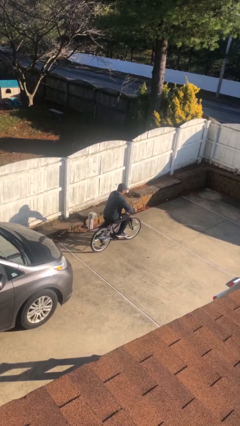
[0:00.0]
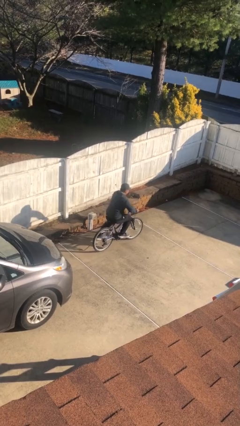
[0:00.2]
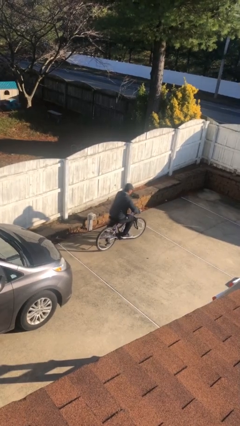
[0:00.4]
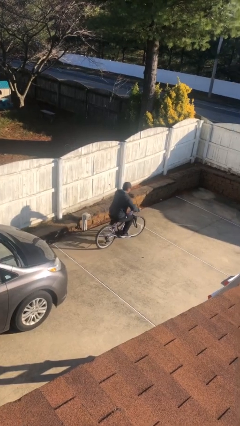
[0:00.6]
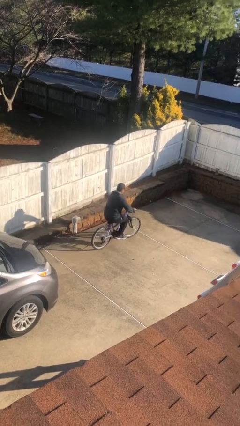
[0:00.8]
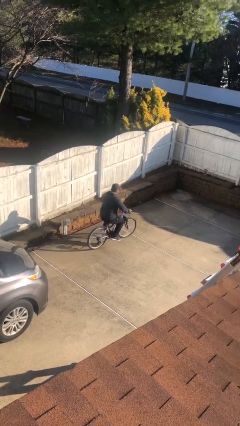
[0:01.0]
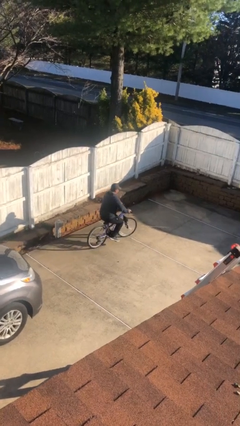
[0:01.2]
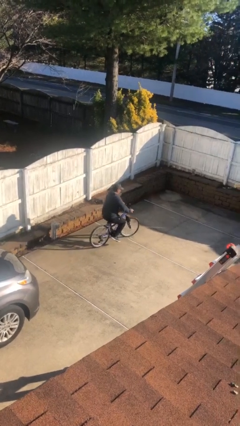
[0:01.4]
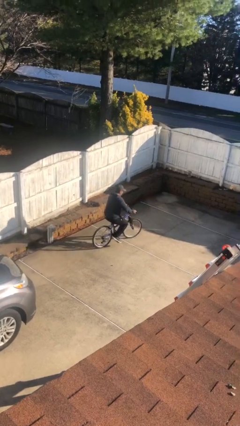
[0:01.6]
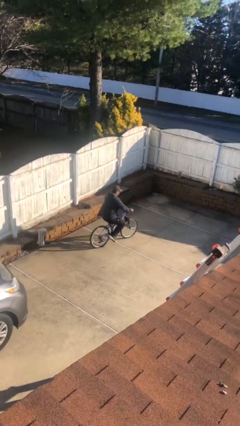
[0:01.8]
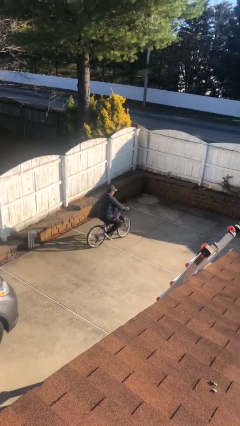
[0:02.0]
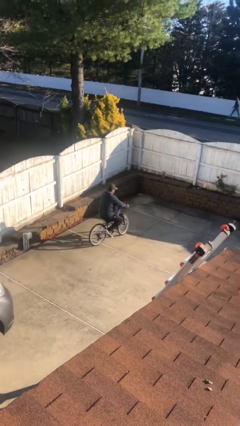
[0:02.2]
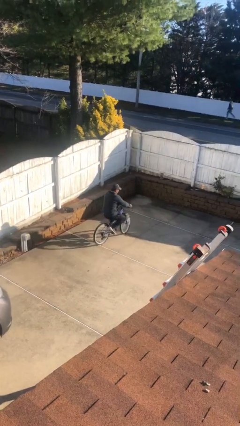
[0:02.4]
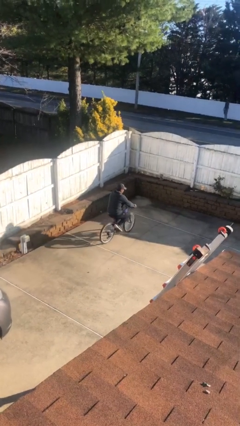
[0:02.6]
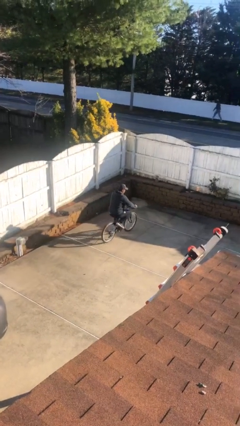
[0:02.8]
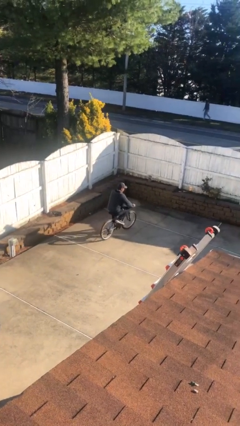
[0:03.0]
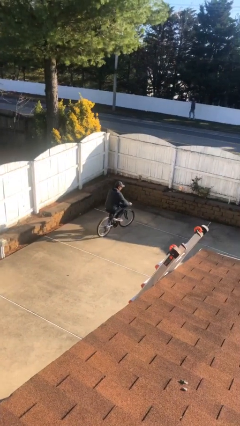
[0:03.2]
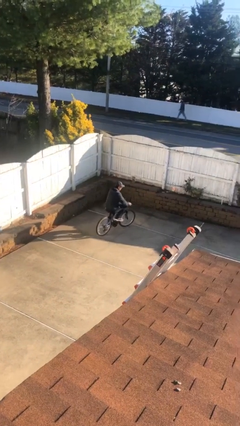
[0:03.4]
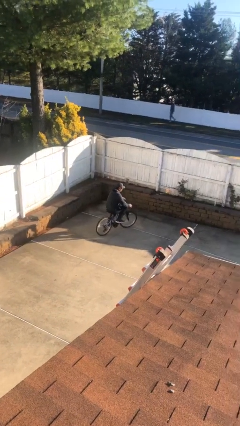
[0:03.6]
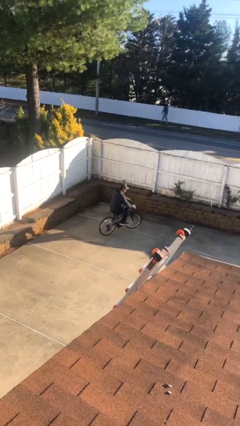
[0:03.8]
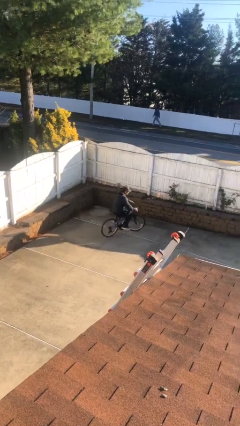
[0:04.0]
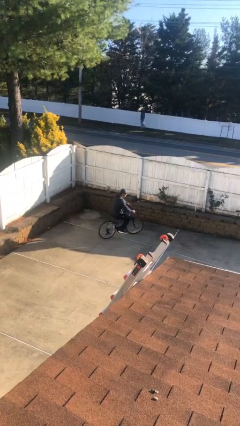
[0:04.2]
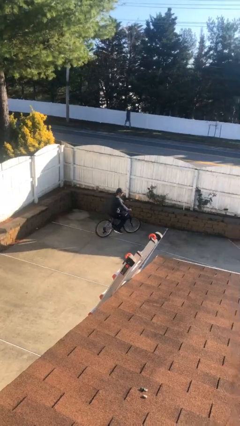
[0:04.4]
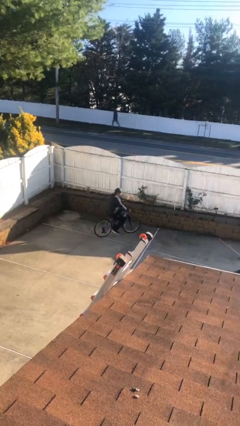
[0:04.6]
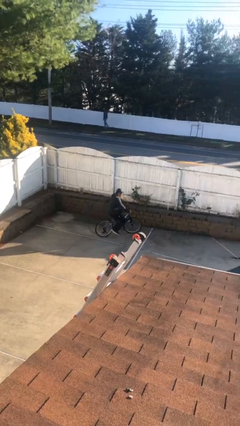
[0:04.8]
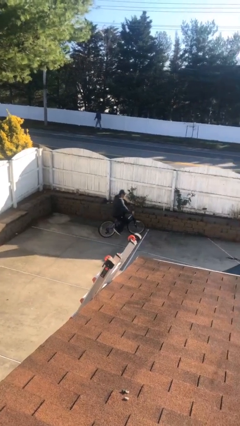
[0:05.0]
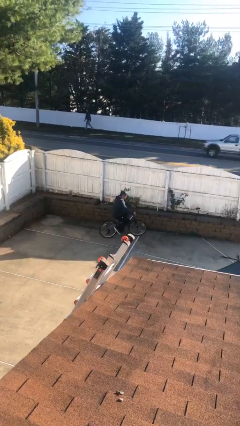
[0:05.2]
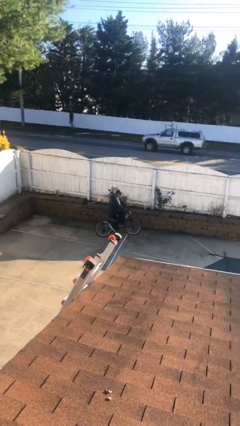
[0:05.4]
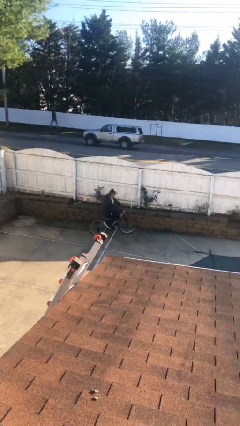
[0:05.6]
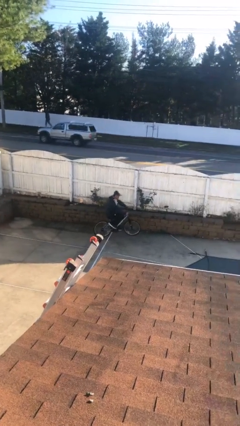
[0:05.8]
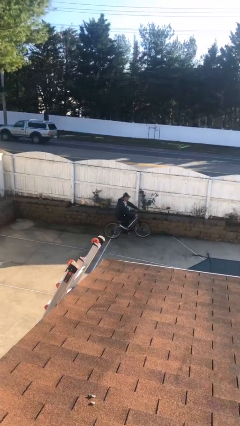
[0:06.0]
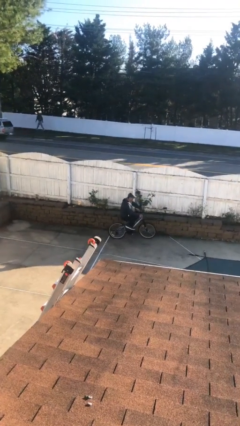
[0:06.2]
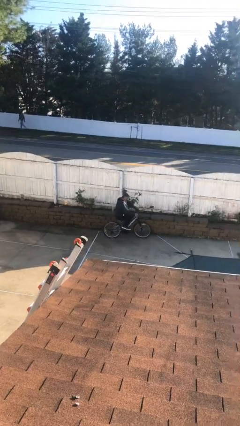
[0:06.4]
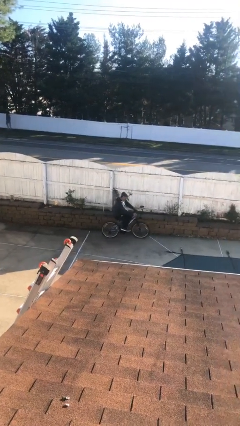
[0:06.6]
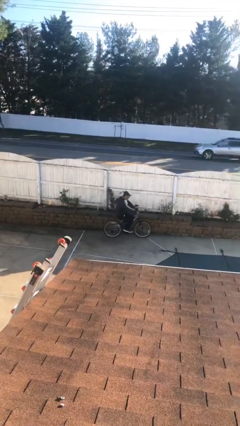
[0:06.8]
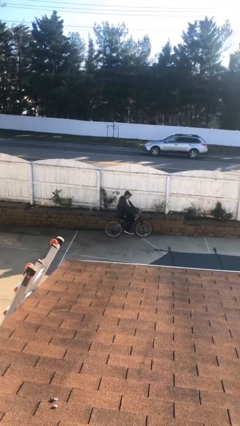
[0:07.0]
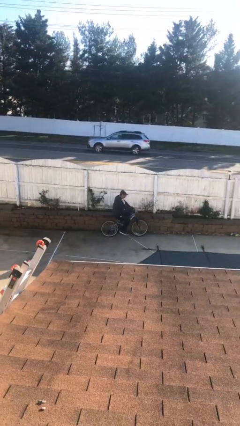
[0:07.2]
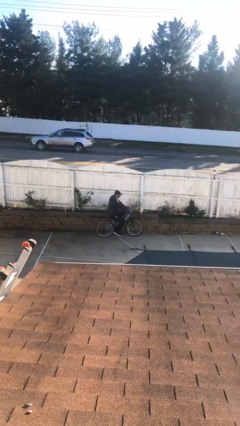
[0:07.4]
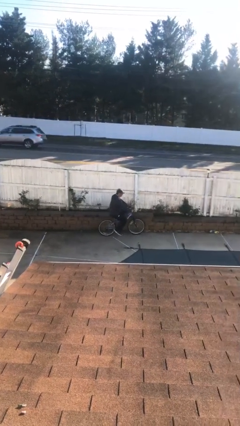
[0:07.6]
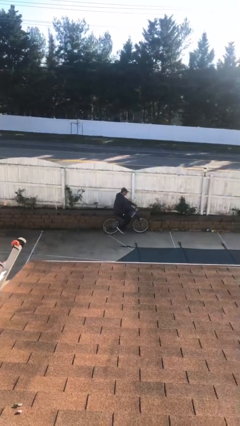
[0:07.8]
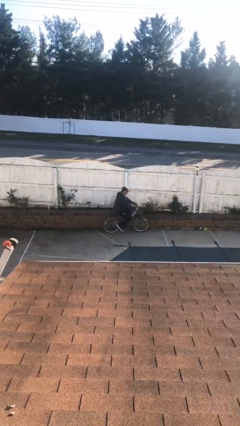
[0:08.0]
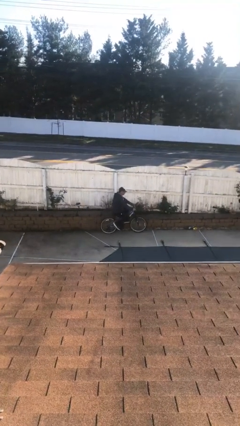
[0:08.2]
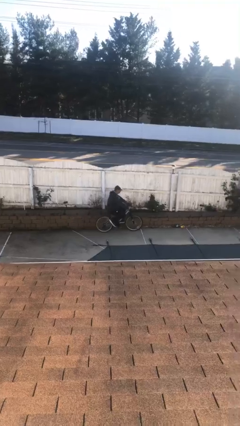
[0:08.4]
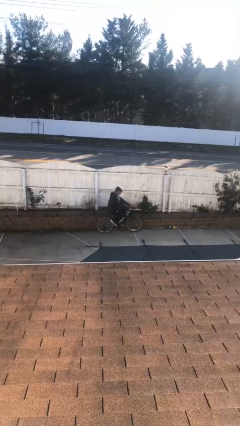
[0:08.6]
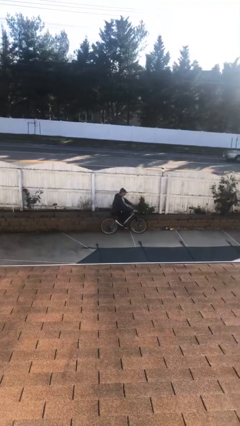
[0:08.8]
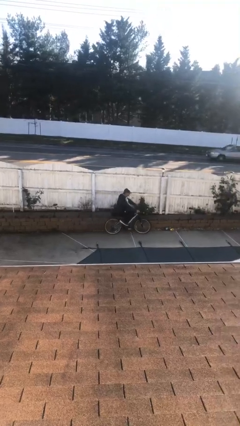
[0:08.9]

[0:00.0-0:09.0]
person rides bicycle

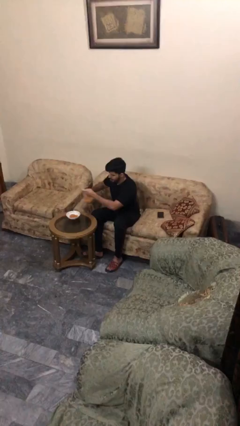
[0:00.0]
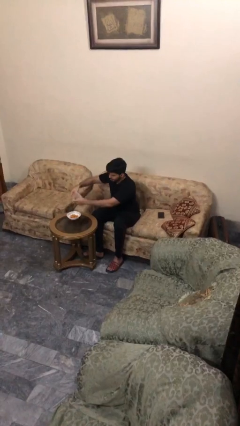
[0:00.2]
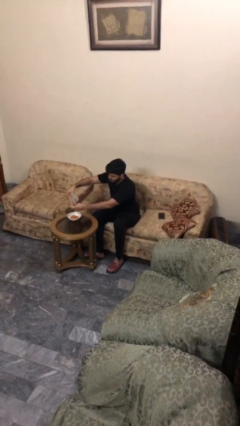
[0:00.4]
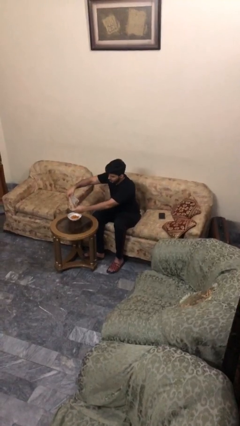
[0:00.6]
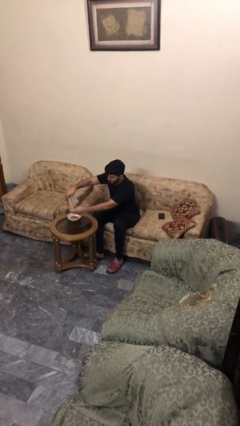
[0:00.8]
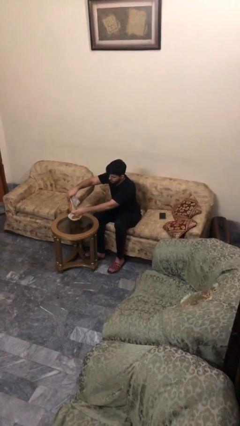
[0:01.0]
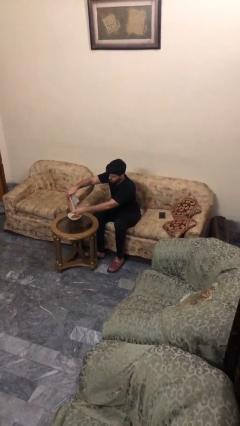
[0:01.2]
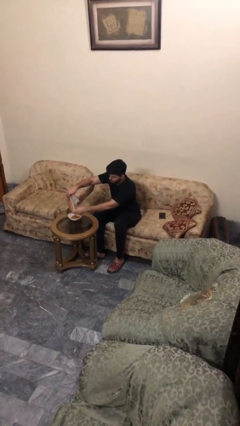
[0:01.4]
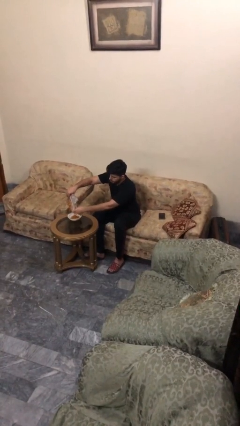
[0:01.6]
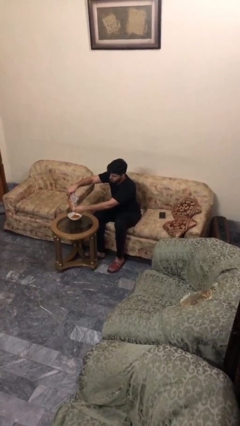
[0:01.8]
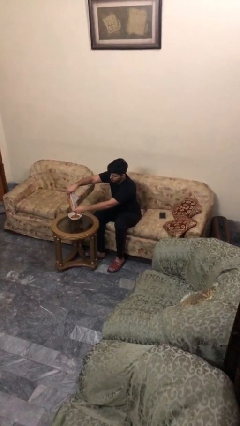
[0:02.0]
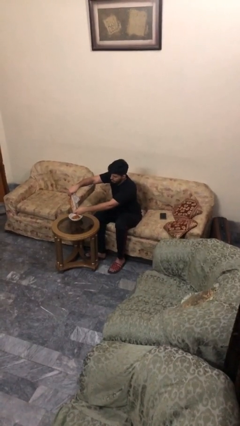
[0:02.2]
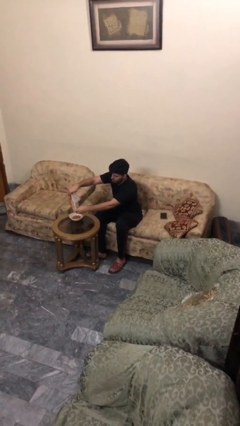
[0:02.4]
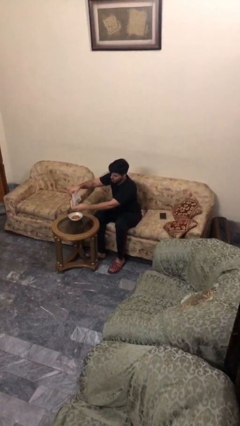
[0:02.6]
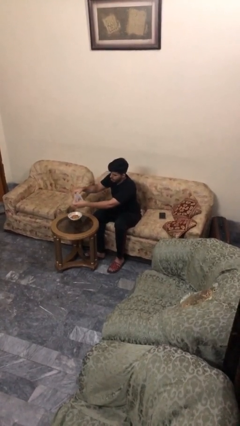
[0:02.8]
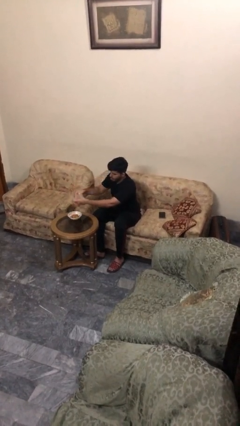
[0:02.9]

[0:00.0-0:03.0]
person pours into bowl

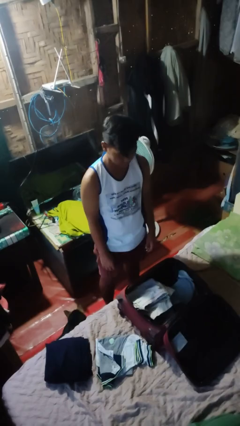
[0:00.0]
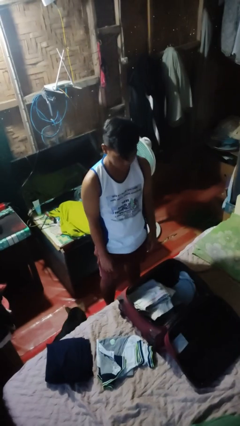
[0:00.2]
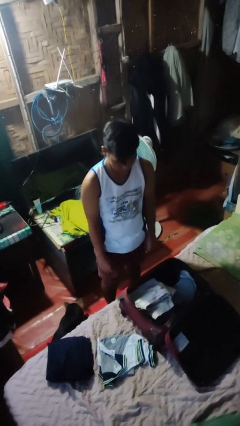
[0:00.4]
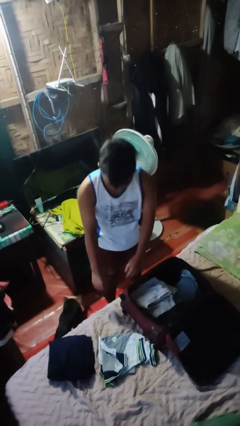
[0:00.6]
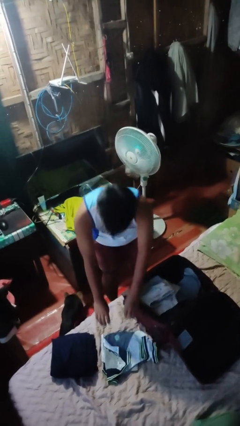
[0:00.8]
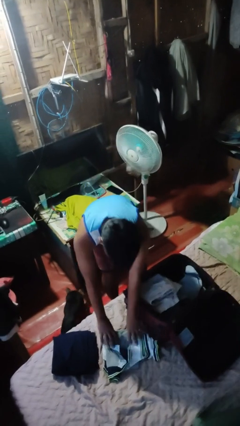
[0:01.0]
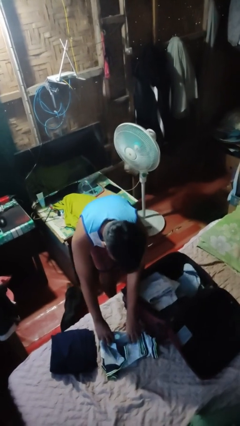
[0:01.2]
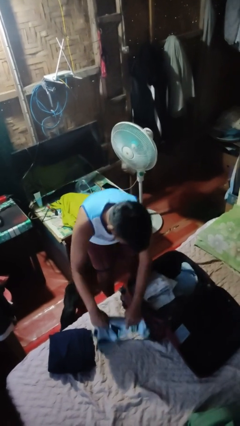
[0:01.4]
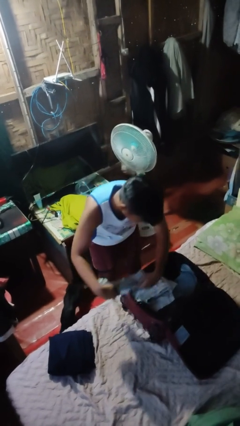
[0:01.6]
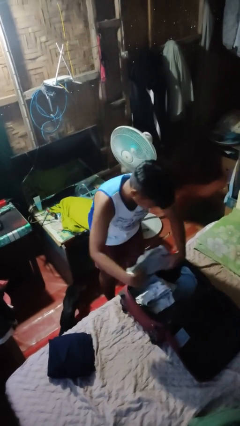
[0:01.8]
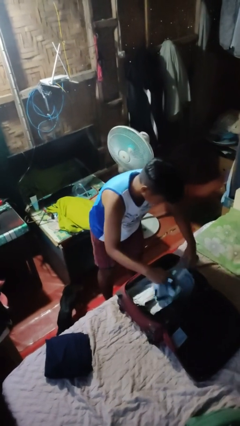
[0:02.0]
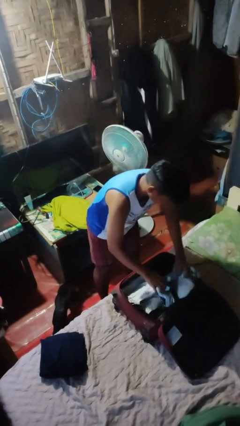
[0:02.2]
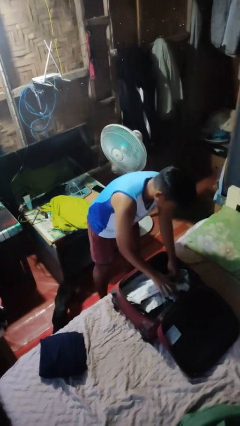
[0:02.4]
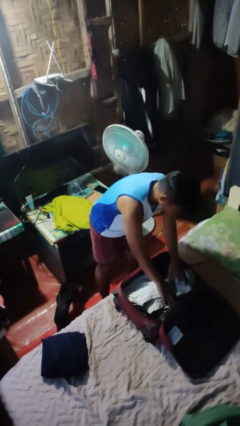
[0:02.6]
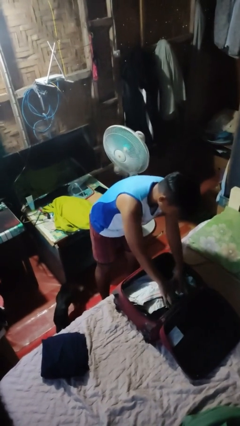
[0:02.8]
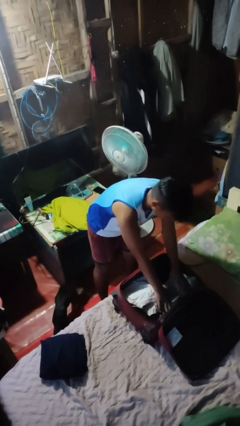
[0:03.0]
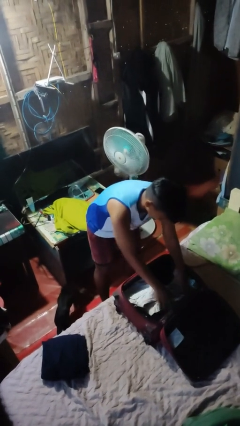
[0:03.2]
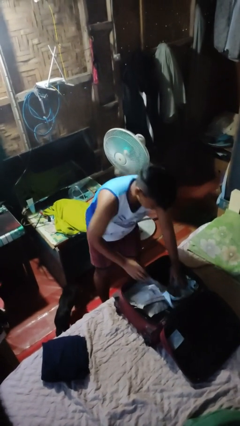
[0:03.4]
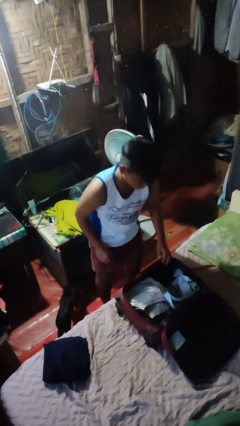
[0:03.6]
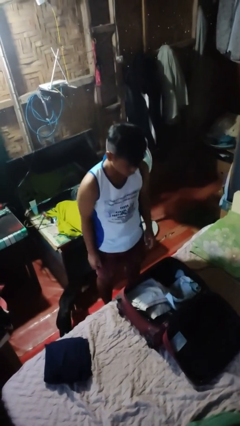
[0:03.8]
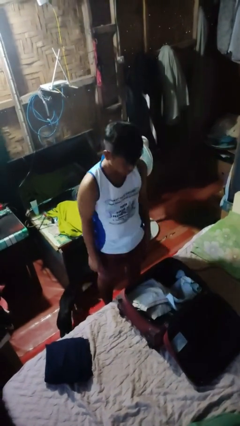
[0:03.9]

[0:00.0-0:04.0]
person loads clothes into suitcase

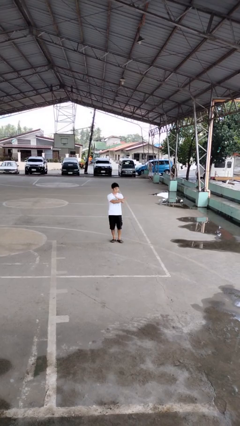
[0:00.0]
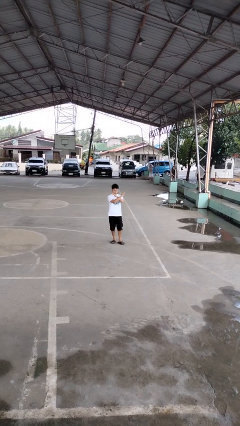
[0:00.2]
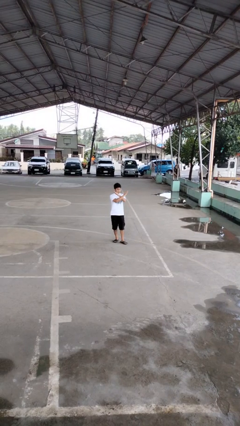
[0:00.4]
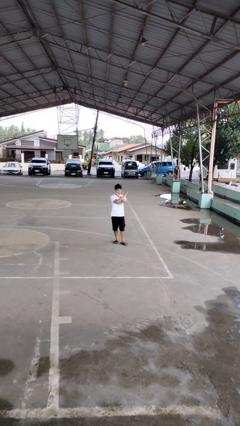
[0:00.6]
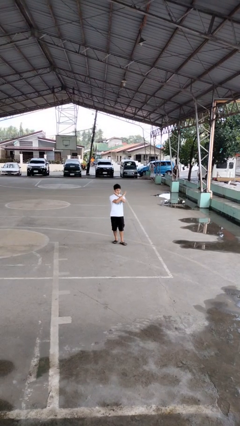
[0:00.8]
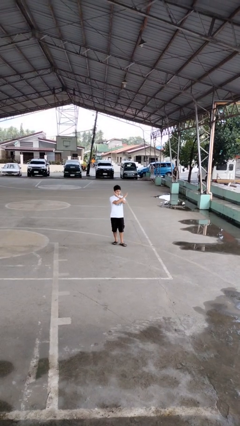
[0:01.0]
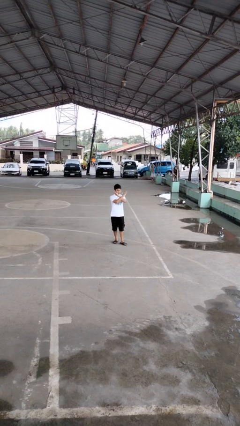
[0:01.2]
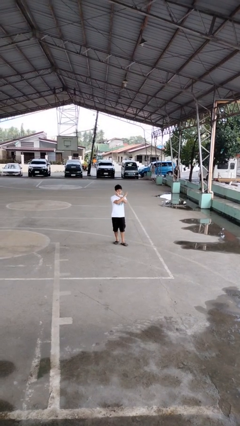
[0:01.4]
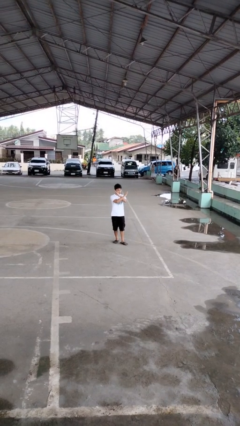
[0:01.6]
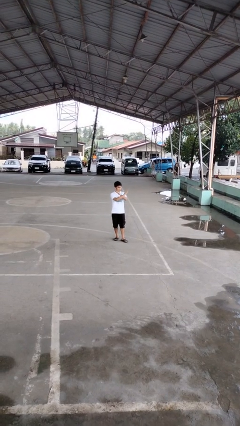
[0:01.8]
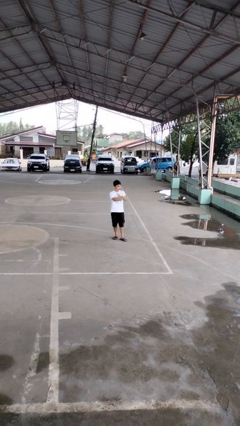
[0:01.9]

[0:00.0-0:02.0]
person gestures arms x
